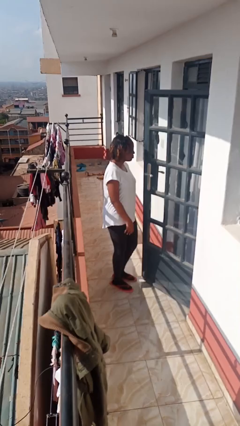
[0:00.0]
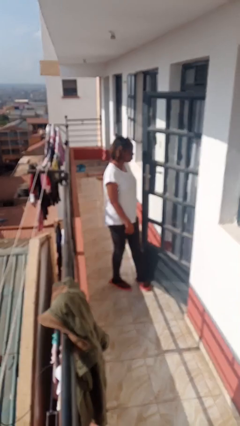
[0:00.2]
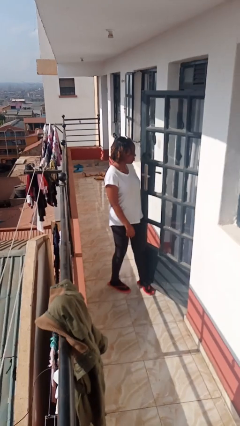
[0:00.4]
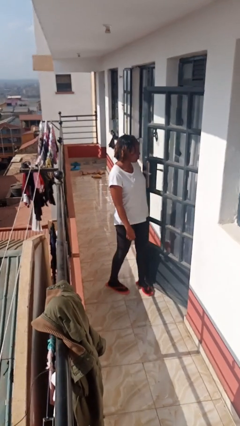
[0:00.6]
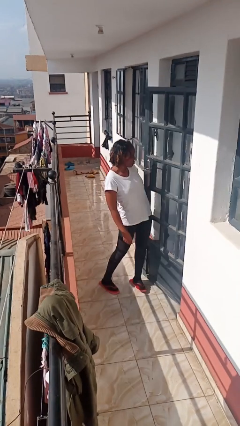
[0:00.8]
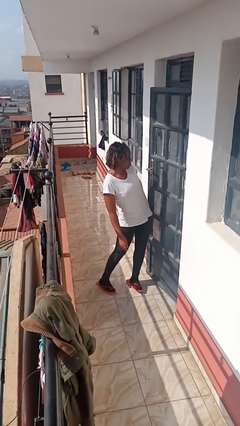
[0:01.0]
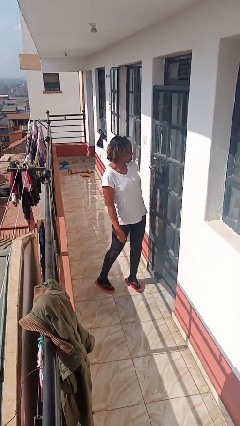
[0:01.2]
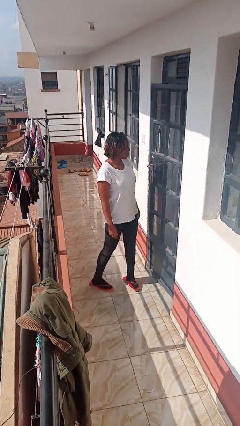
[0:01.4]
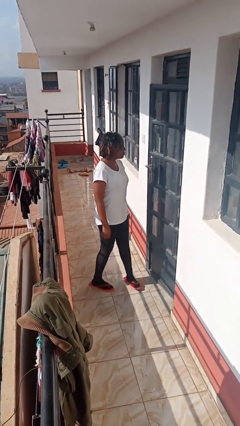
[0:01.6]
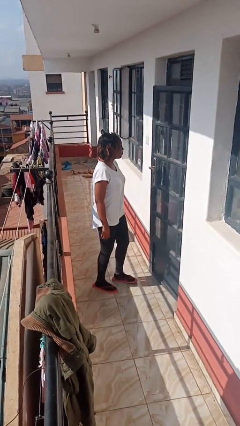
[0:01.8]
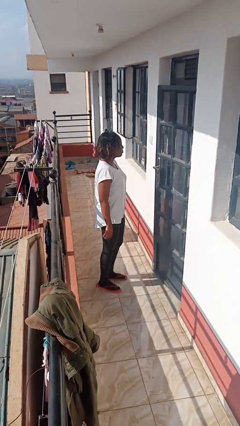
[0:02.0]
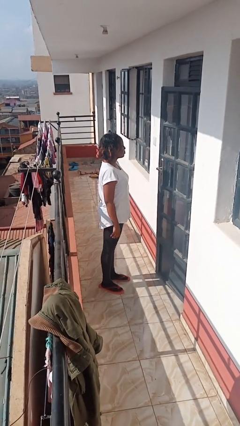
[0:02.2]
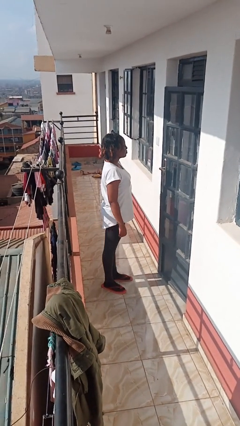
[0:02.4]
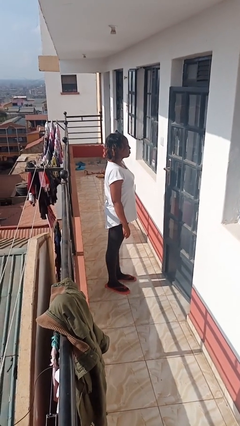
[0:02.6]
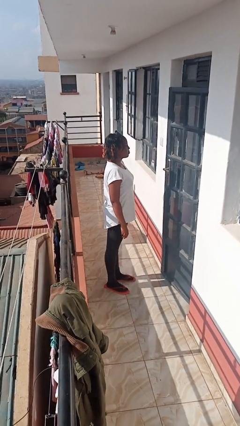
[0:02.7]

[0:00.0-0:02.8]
person closes door with hip

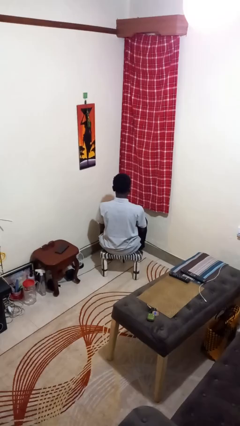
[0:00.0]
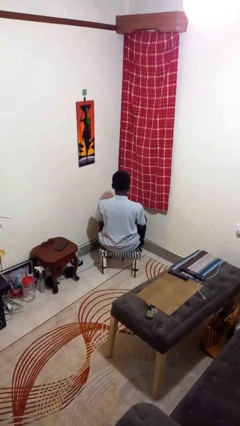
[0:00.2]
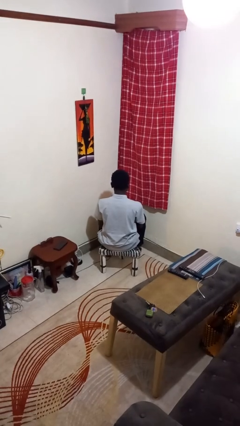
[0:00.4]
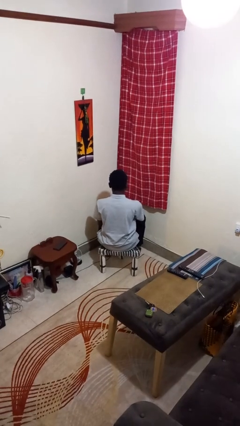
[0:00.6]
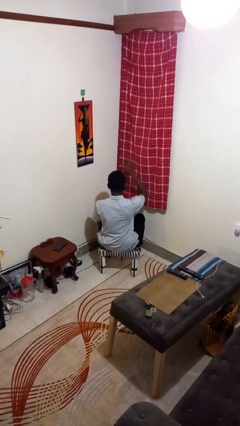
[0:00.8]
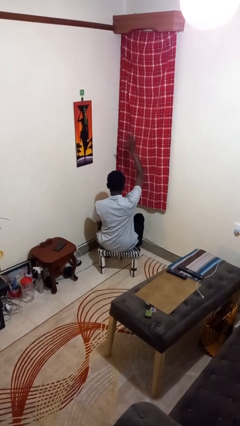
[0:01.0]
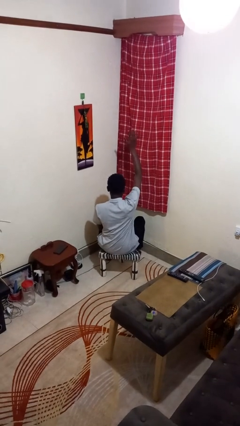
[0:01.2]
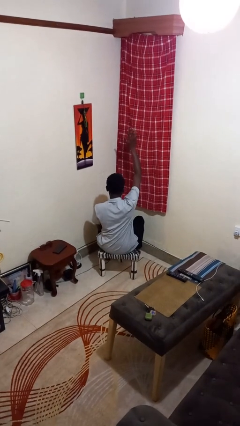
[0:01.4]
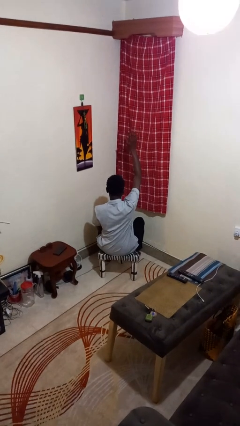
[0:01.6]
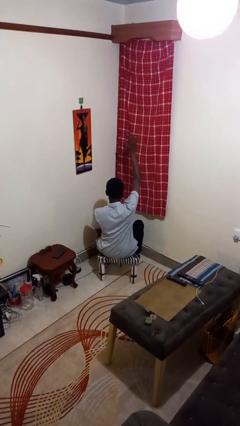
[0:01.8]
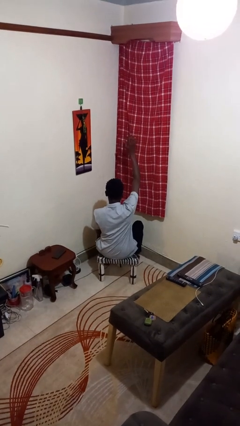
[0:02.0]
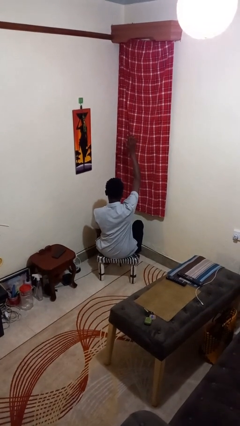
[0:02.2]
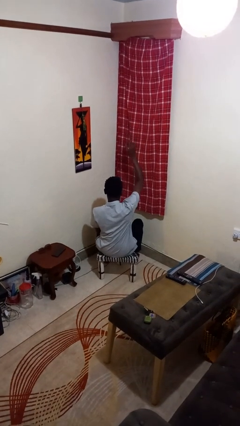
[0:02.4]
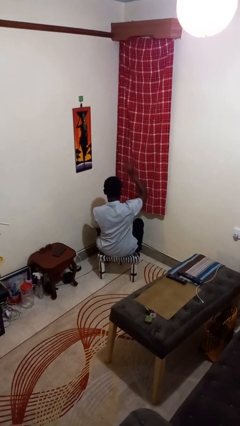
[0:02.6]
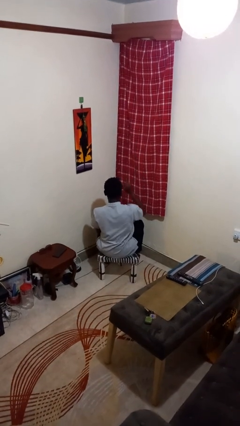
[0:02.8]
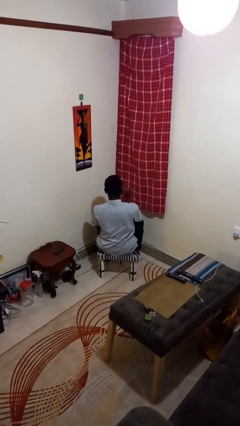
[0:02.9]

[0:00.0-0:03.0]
person gestures raise hand

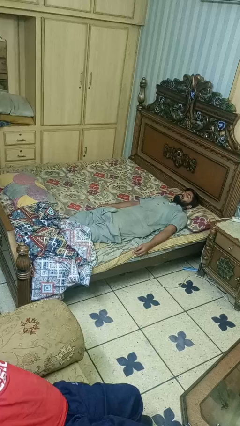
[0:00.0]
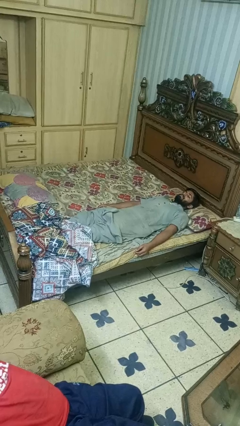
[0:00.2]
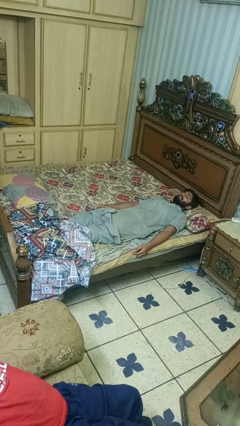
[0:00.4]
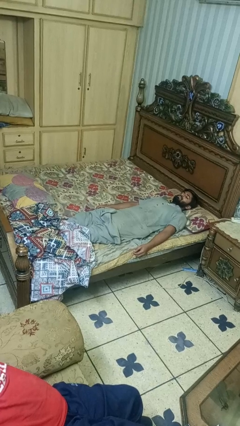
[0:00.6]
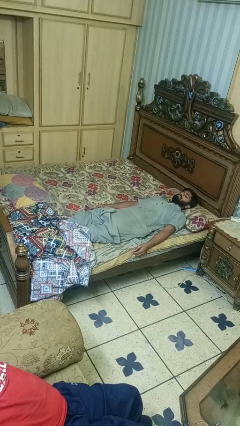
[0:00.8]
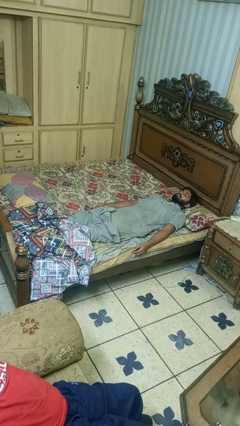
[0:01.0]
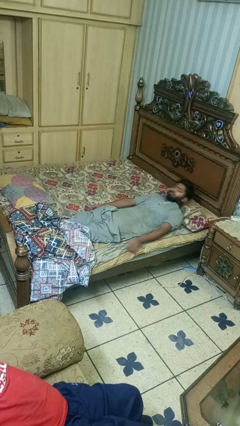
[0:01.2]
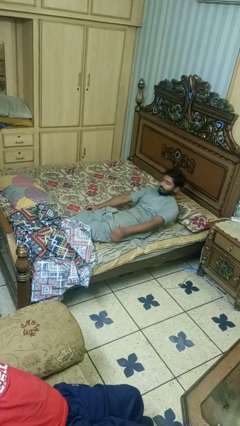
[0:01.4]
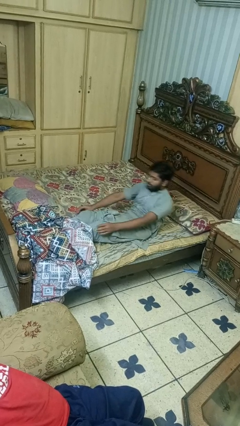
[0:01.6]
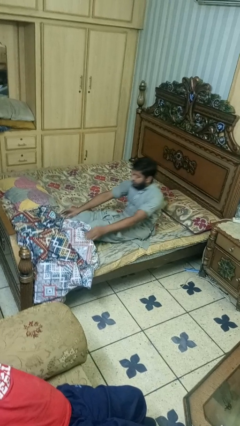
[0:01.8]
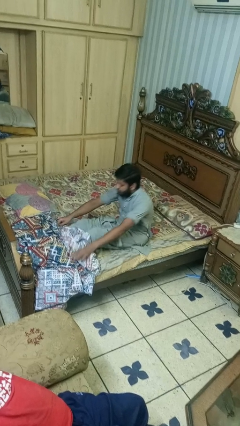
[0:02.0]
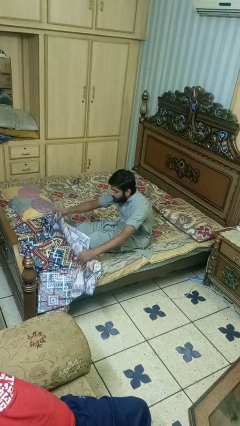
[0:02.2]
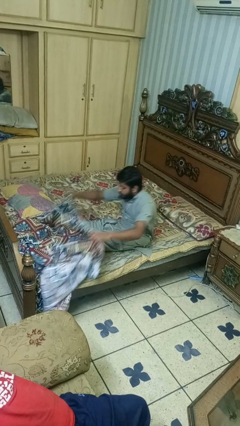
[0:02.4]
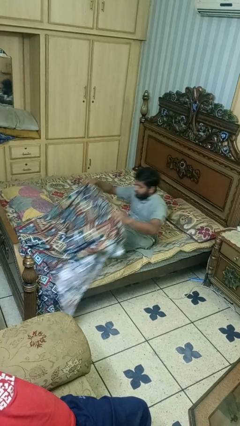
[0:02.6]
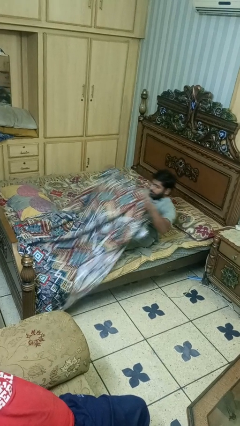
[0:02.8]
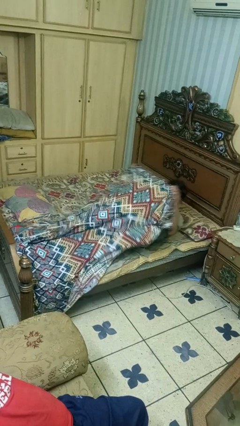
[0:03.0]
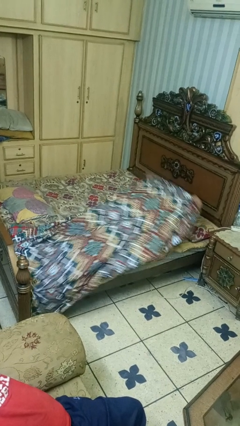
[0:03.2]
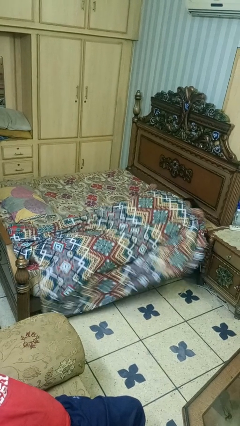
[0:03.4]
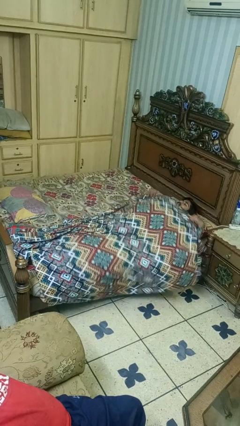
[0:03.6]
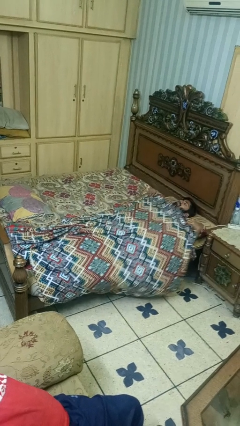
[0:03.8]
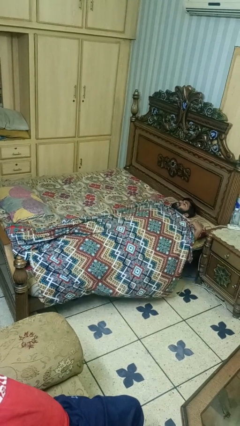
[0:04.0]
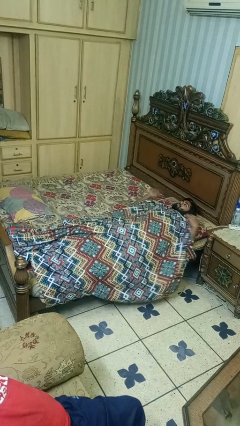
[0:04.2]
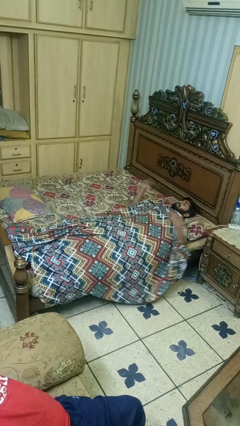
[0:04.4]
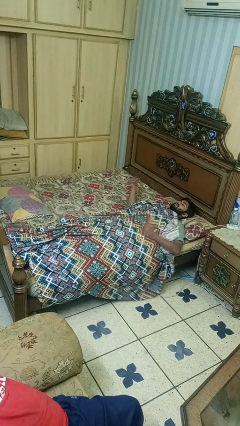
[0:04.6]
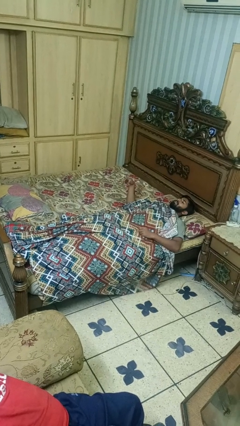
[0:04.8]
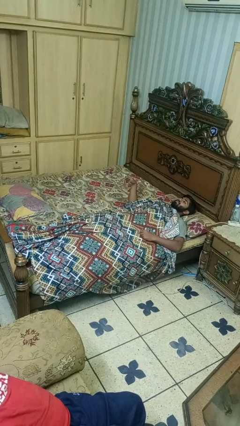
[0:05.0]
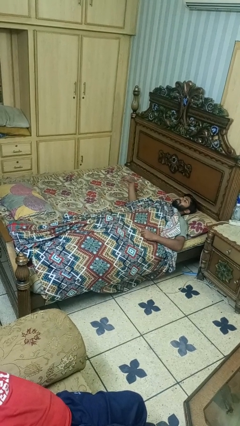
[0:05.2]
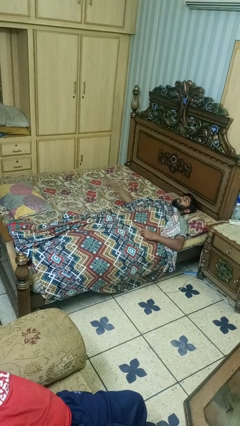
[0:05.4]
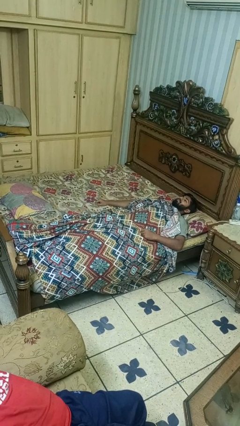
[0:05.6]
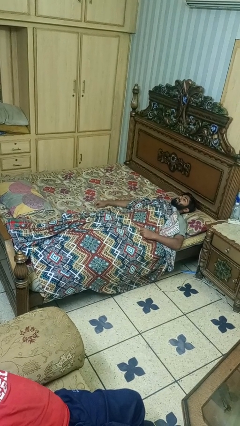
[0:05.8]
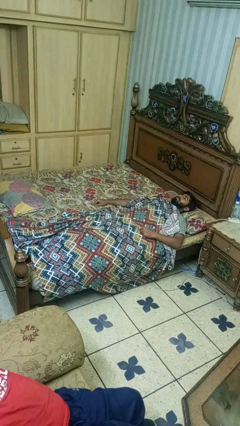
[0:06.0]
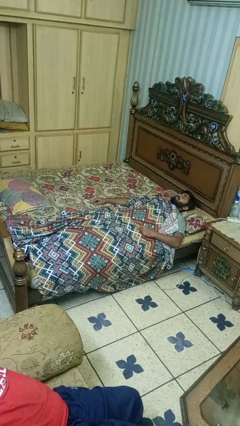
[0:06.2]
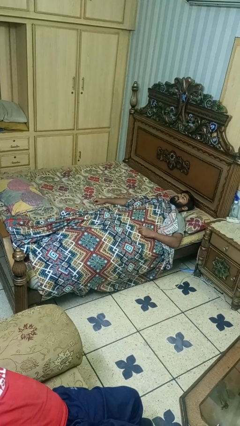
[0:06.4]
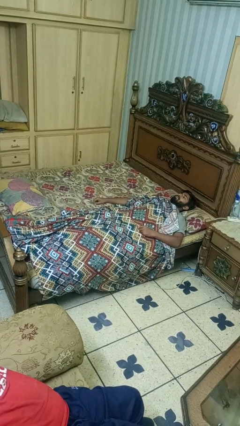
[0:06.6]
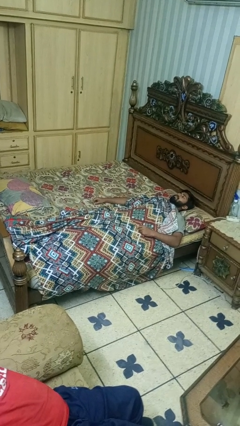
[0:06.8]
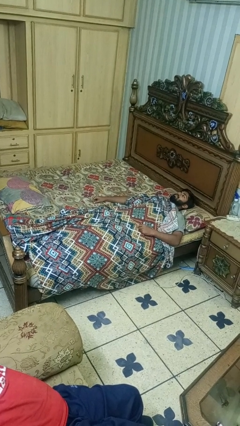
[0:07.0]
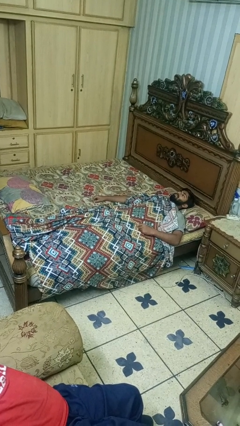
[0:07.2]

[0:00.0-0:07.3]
person covers with bedsheets

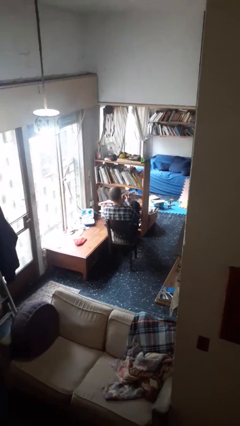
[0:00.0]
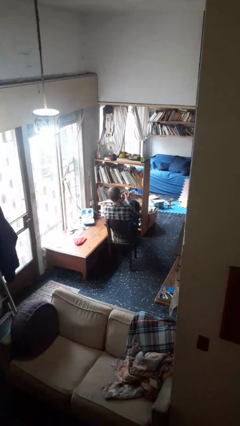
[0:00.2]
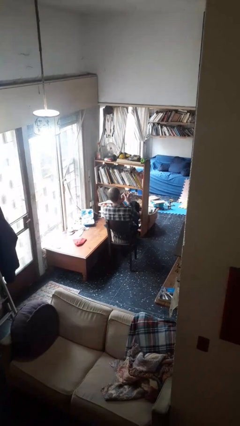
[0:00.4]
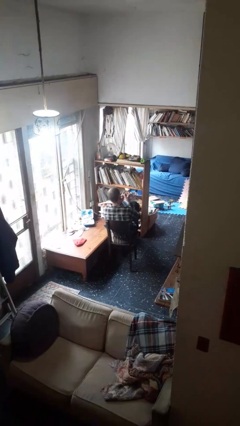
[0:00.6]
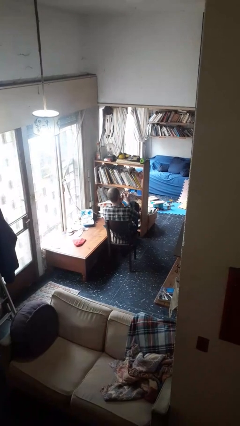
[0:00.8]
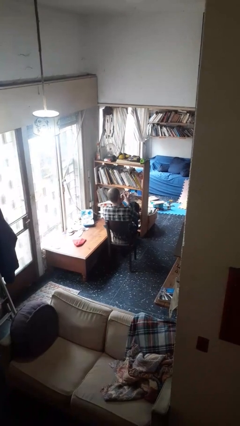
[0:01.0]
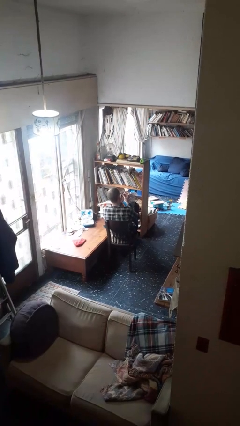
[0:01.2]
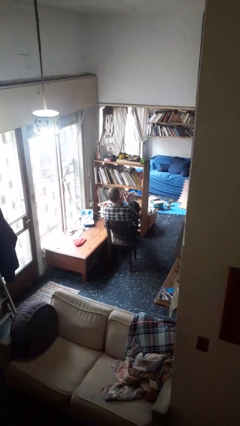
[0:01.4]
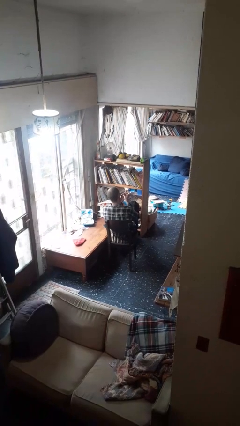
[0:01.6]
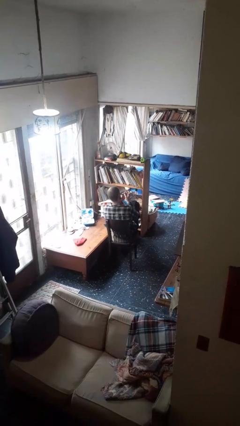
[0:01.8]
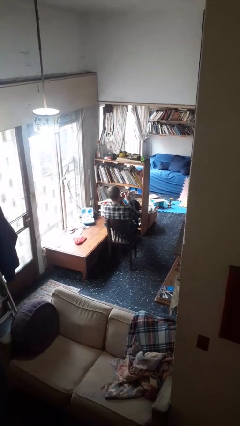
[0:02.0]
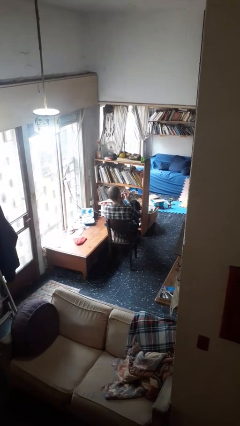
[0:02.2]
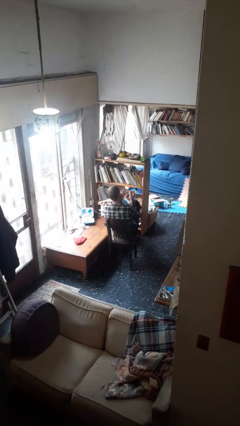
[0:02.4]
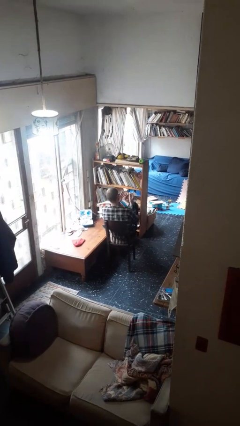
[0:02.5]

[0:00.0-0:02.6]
person files fingernails

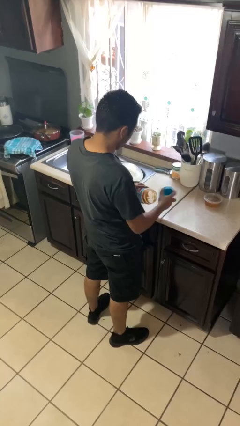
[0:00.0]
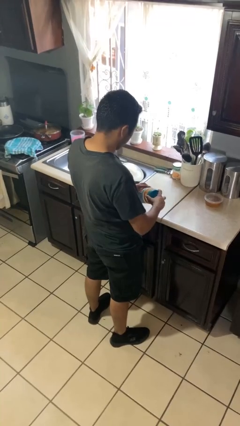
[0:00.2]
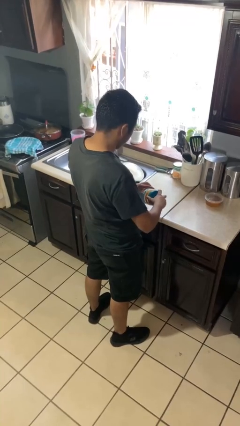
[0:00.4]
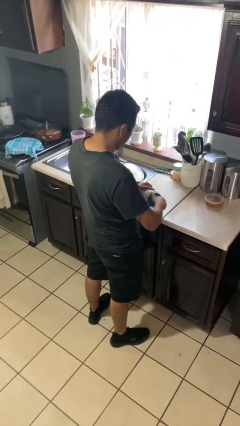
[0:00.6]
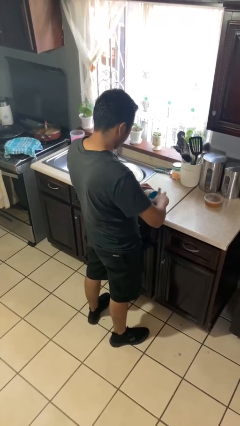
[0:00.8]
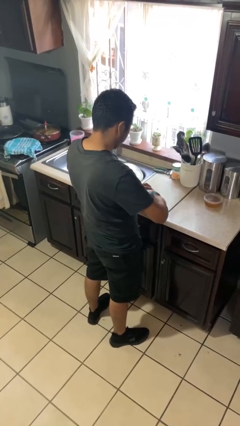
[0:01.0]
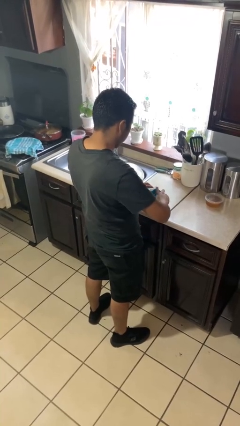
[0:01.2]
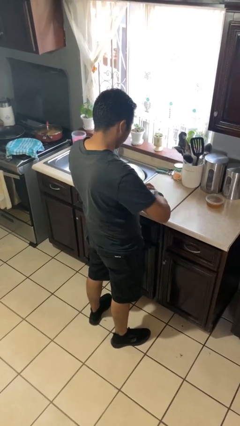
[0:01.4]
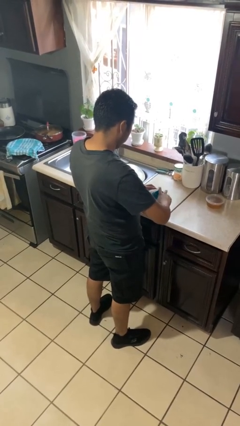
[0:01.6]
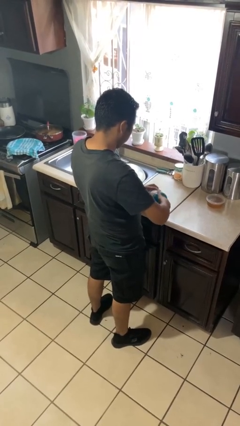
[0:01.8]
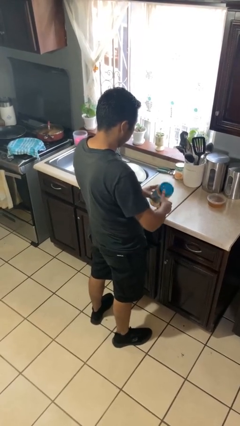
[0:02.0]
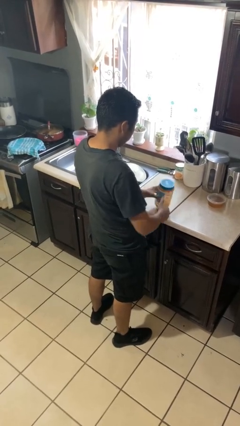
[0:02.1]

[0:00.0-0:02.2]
person closes jar
